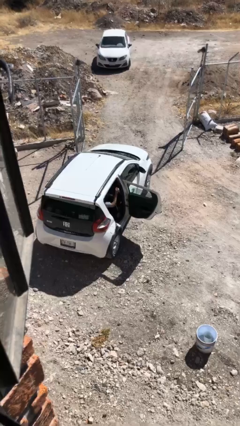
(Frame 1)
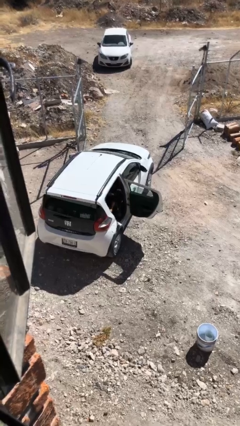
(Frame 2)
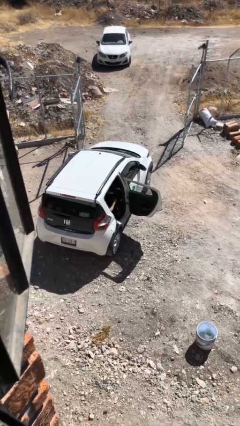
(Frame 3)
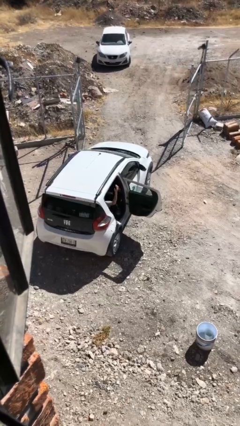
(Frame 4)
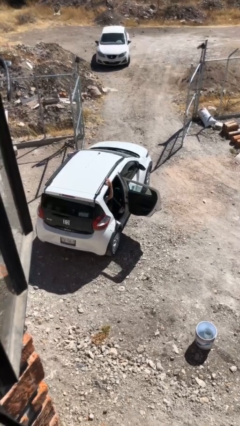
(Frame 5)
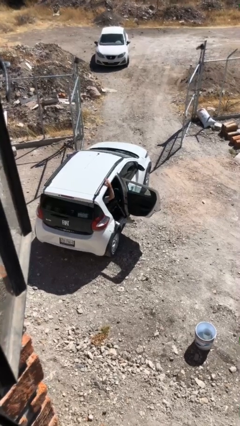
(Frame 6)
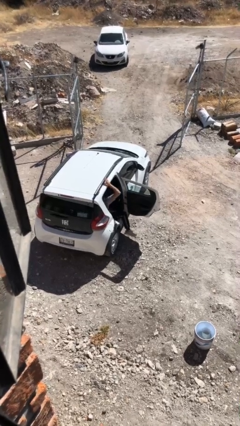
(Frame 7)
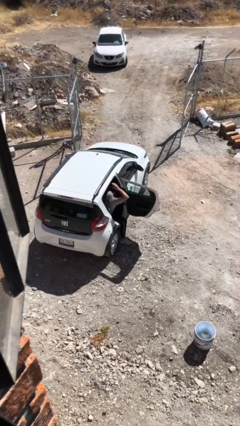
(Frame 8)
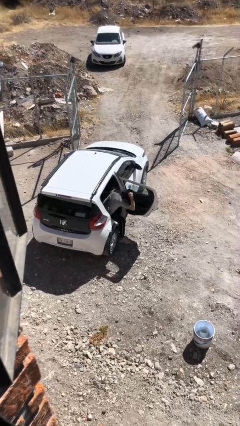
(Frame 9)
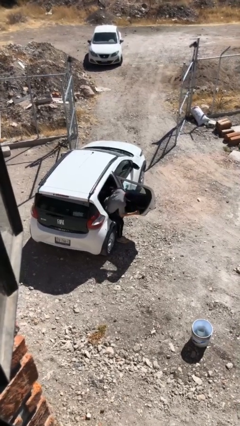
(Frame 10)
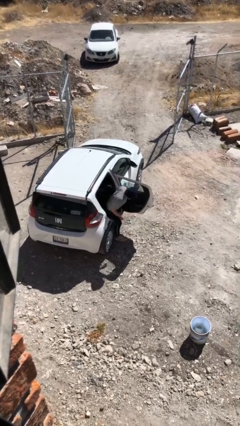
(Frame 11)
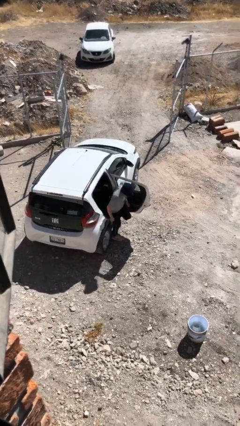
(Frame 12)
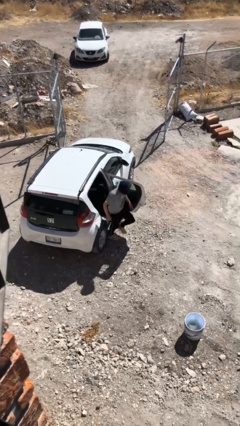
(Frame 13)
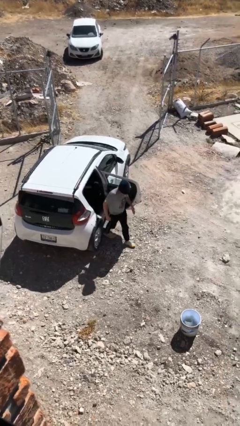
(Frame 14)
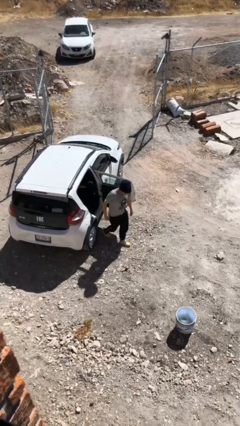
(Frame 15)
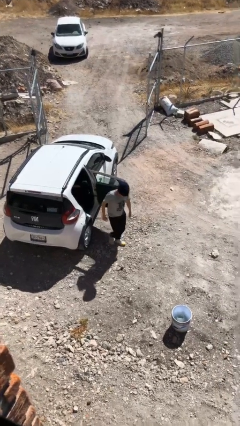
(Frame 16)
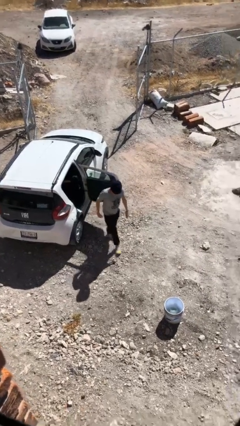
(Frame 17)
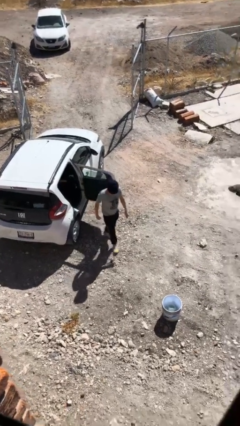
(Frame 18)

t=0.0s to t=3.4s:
person exits car

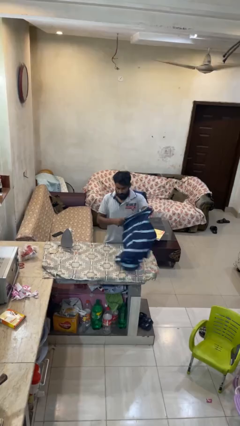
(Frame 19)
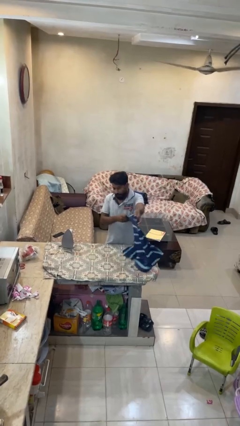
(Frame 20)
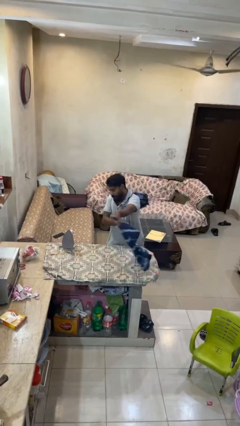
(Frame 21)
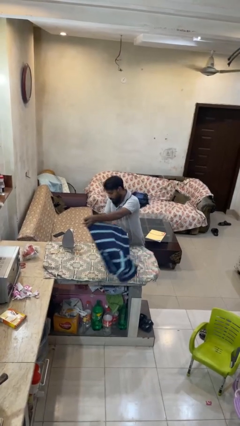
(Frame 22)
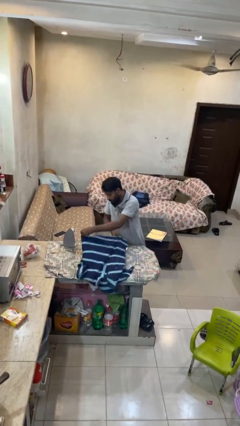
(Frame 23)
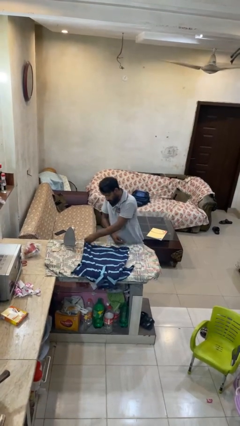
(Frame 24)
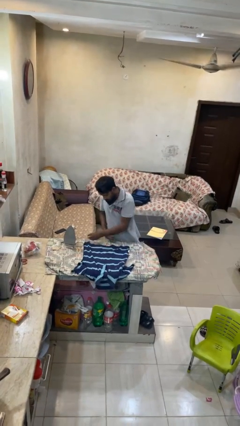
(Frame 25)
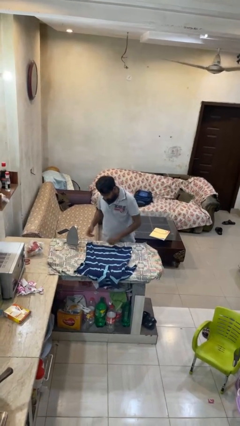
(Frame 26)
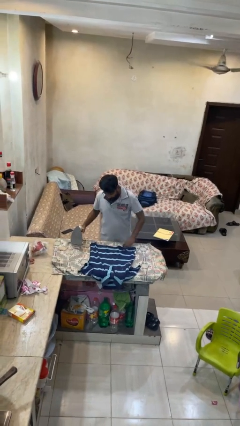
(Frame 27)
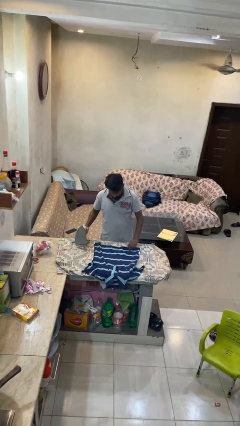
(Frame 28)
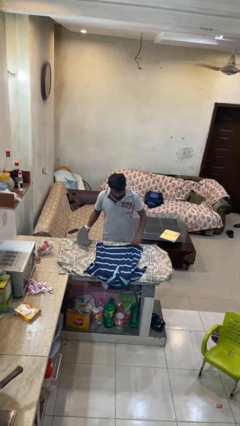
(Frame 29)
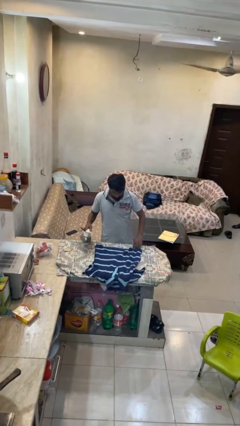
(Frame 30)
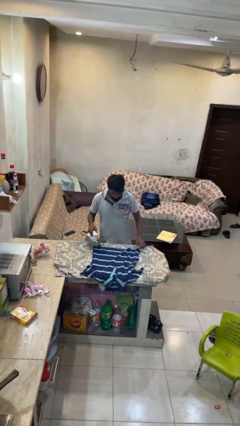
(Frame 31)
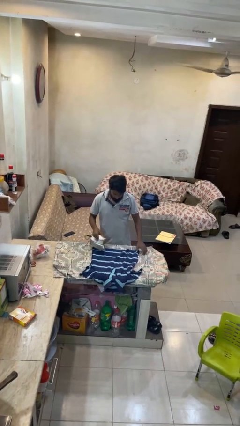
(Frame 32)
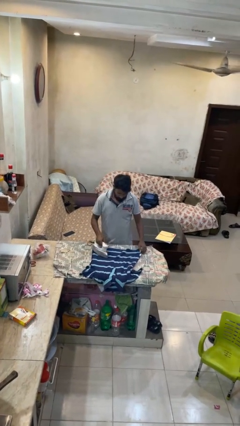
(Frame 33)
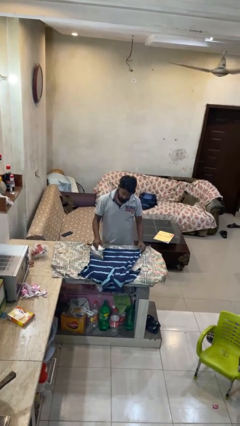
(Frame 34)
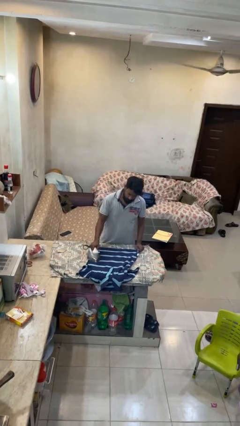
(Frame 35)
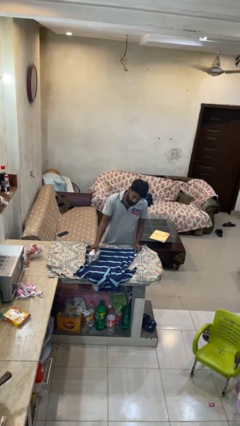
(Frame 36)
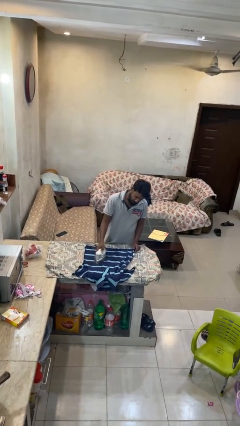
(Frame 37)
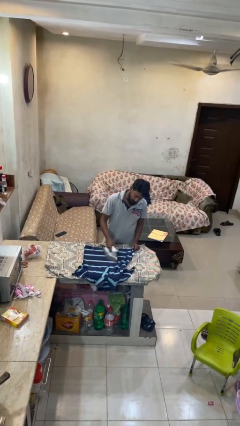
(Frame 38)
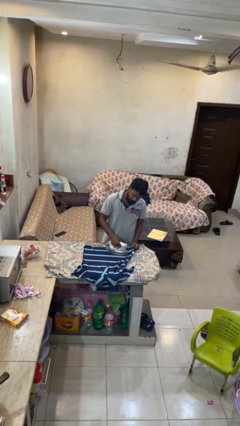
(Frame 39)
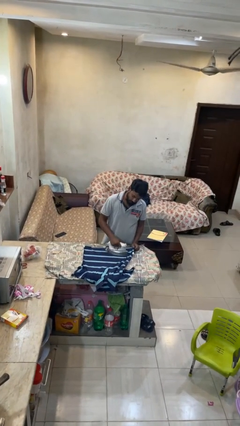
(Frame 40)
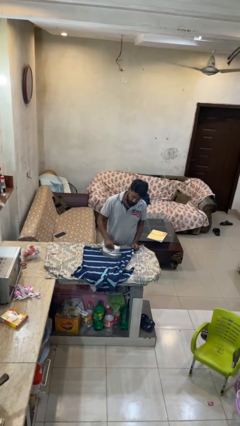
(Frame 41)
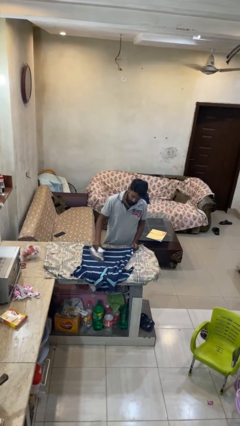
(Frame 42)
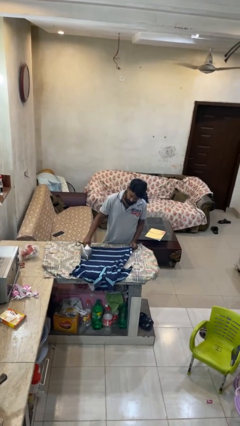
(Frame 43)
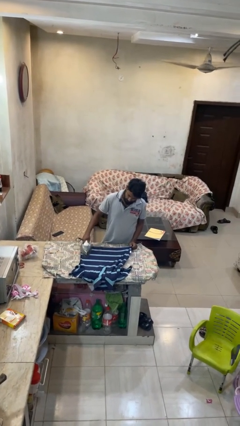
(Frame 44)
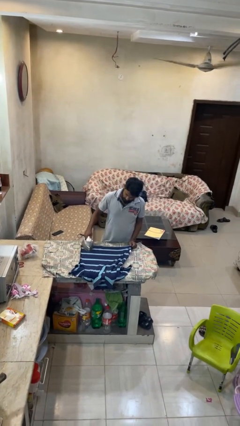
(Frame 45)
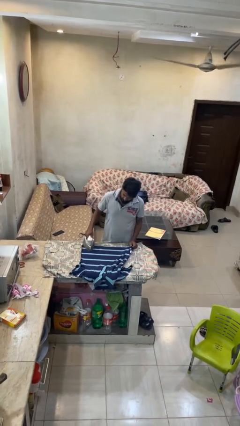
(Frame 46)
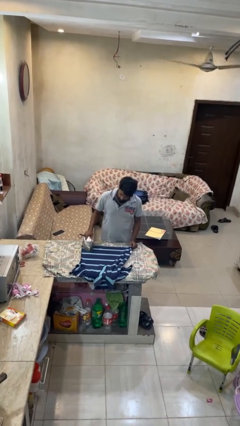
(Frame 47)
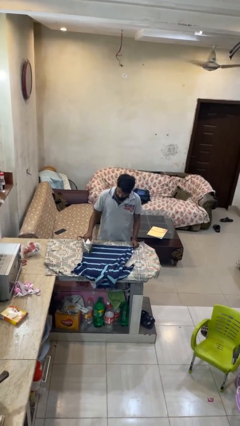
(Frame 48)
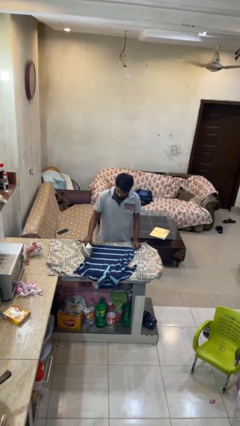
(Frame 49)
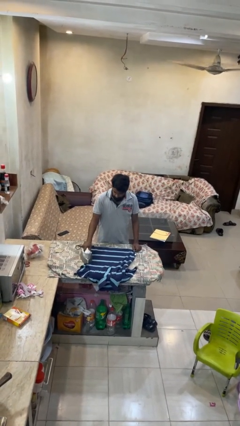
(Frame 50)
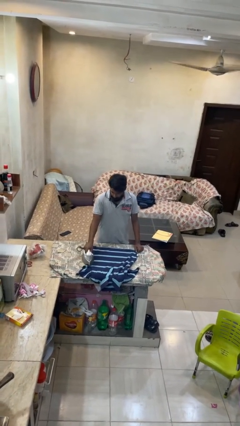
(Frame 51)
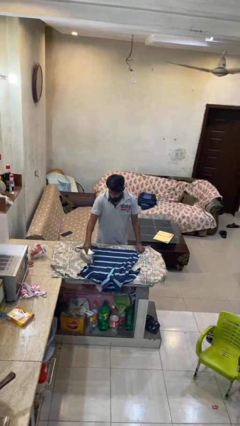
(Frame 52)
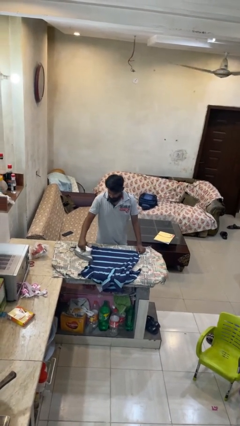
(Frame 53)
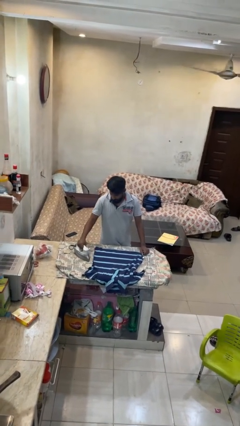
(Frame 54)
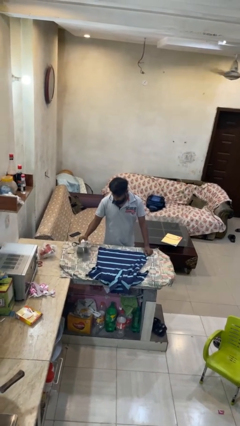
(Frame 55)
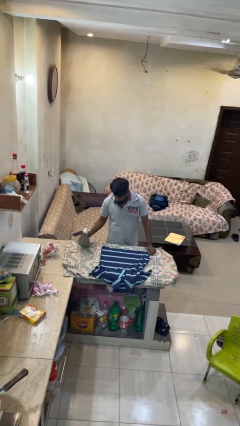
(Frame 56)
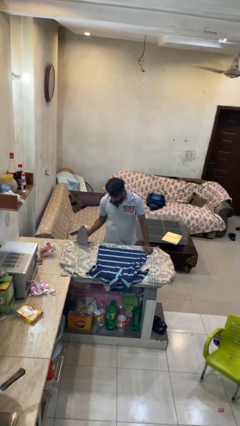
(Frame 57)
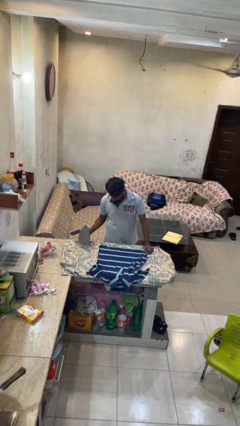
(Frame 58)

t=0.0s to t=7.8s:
person irons clothes

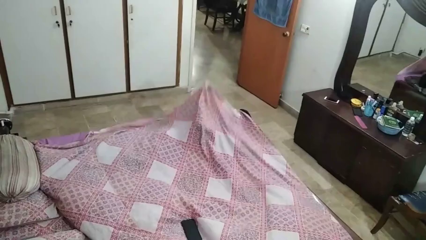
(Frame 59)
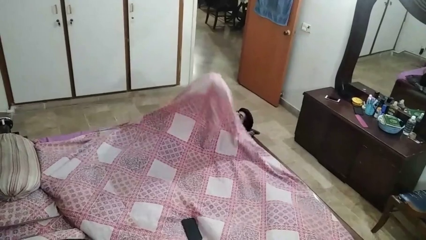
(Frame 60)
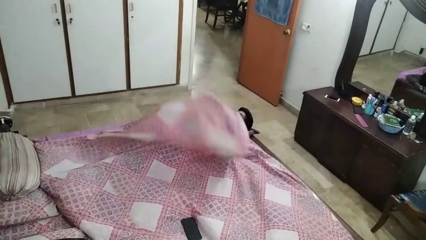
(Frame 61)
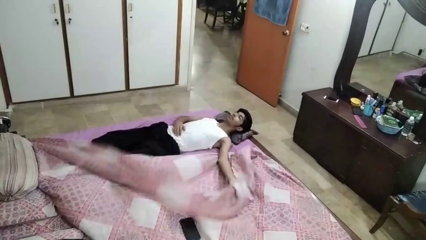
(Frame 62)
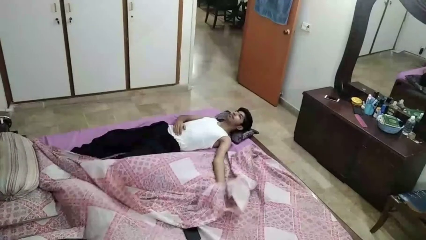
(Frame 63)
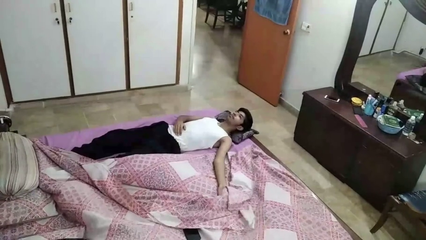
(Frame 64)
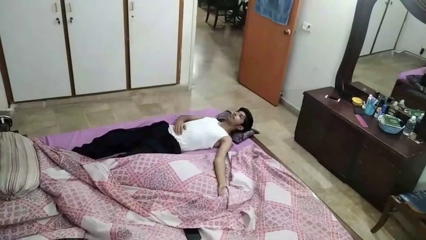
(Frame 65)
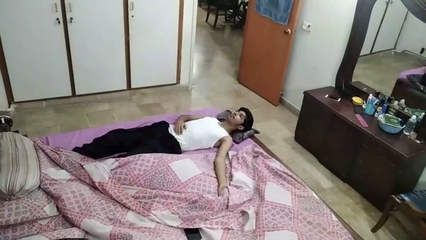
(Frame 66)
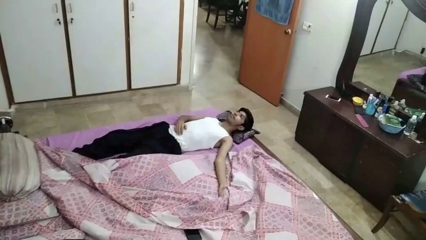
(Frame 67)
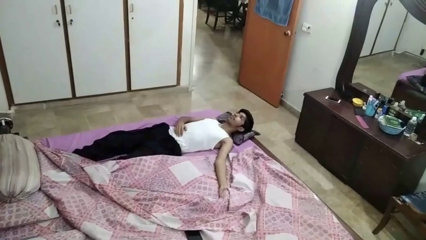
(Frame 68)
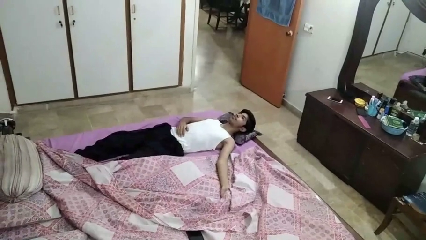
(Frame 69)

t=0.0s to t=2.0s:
person uncovers with bedsheets

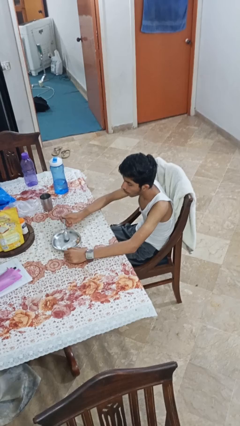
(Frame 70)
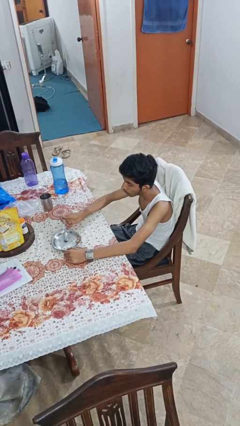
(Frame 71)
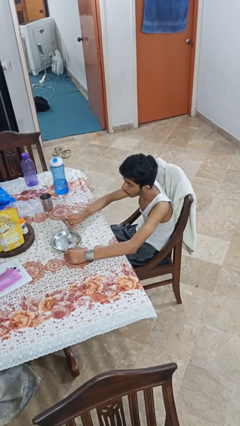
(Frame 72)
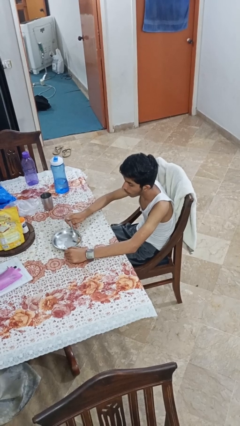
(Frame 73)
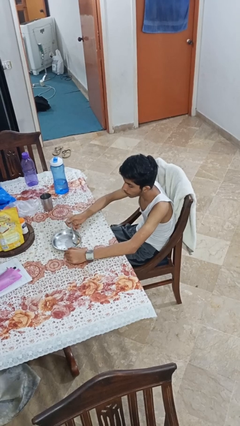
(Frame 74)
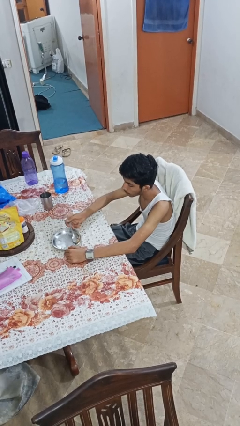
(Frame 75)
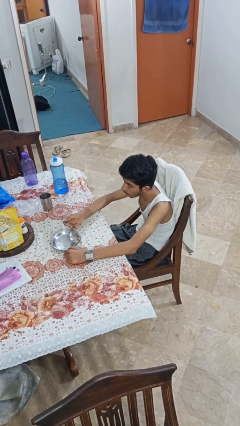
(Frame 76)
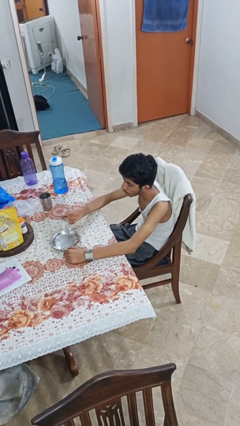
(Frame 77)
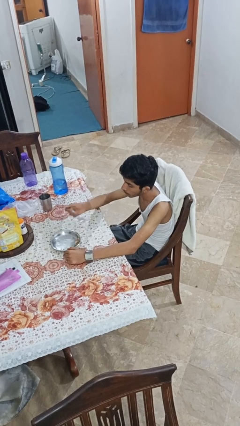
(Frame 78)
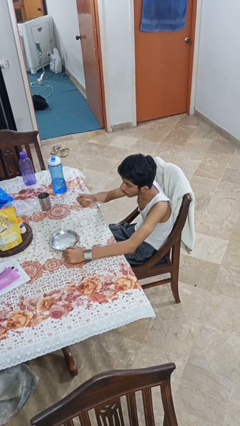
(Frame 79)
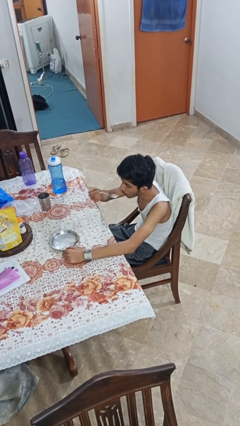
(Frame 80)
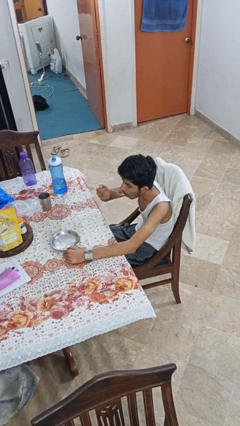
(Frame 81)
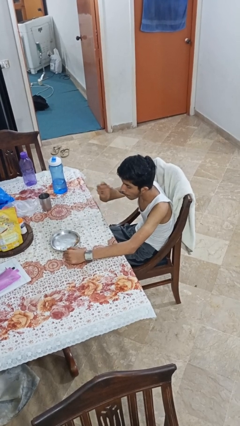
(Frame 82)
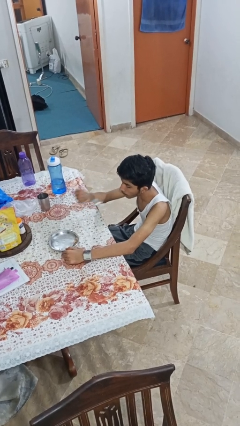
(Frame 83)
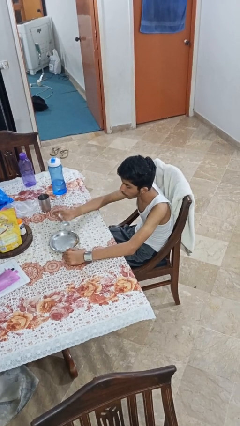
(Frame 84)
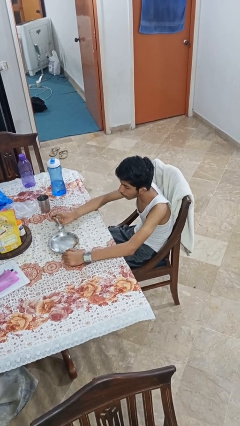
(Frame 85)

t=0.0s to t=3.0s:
person eats with utensil

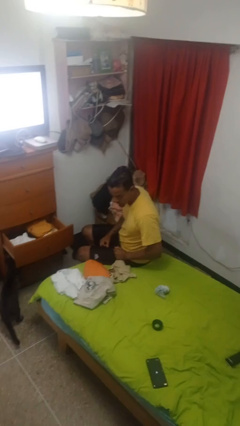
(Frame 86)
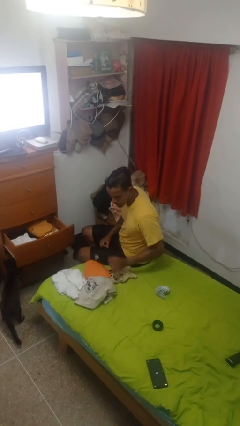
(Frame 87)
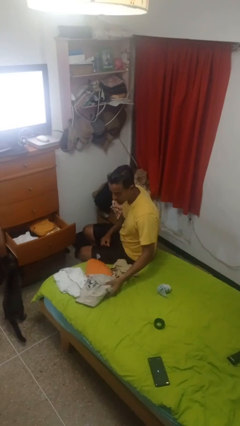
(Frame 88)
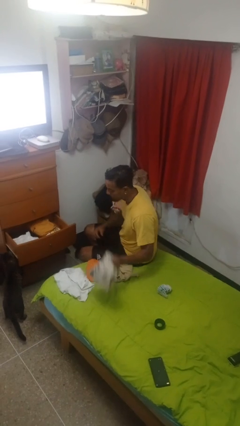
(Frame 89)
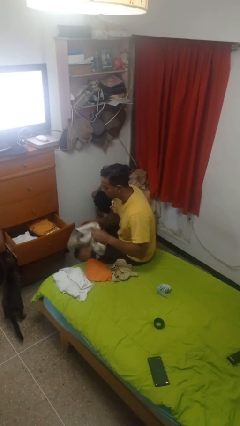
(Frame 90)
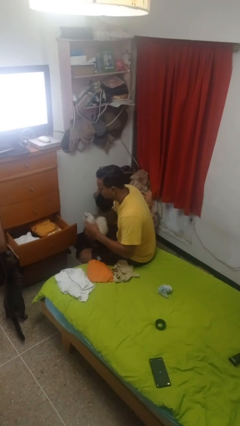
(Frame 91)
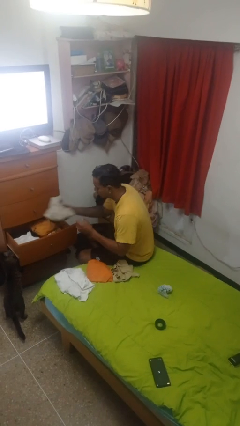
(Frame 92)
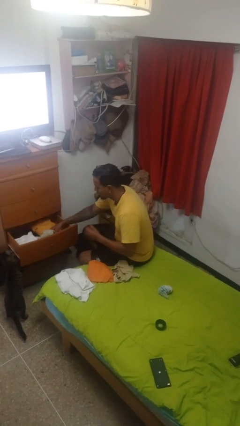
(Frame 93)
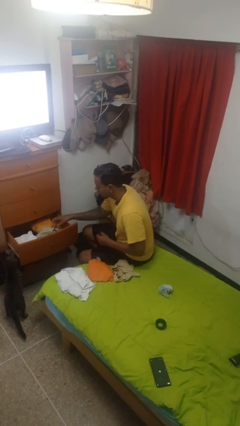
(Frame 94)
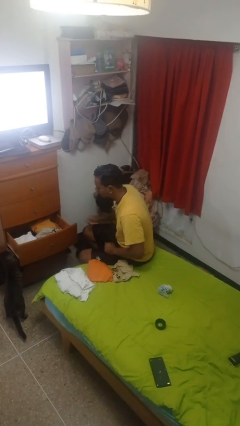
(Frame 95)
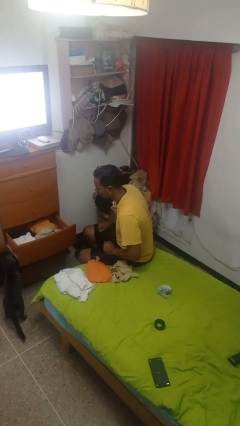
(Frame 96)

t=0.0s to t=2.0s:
person puts clothes into dresser
